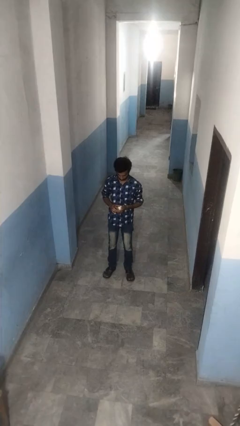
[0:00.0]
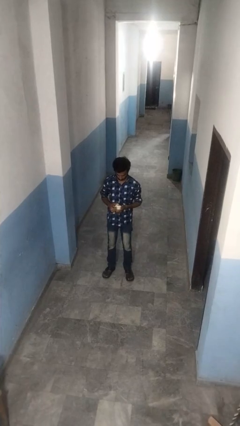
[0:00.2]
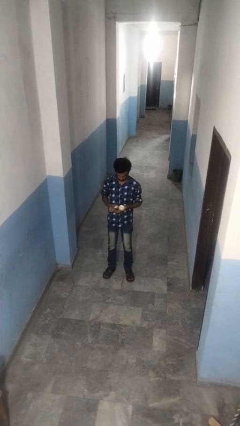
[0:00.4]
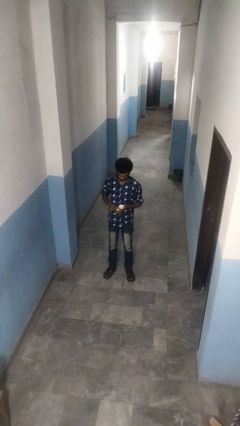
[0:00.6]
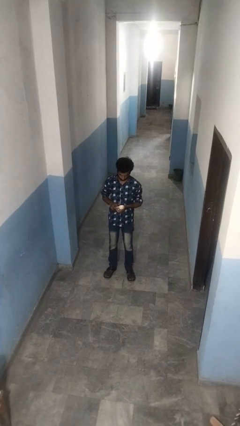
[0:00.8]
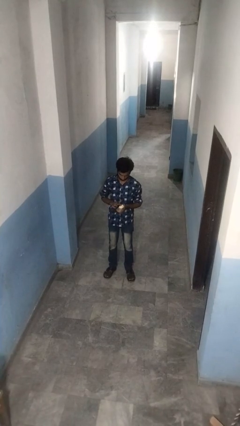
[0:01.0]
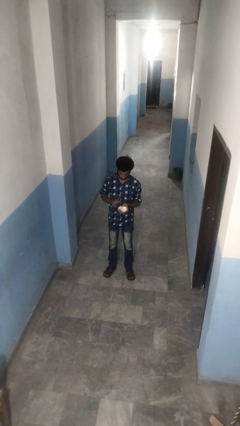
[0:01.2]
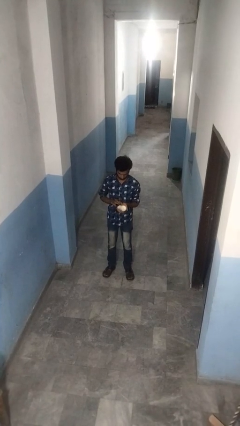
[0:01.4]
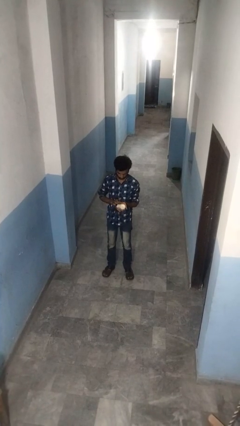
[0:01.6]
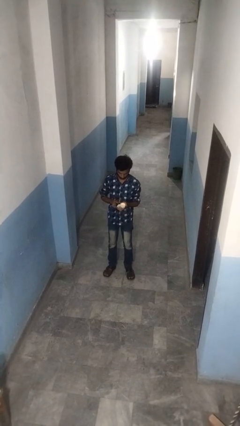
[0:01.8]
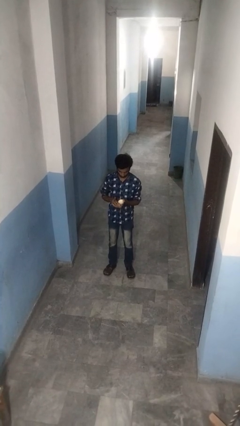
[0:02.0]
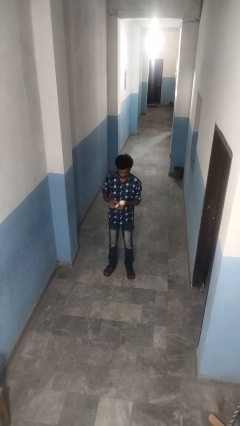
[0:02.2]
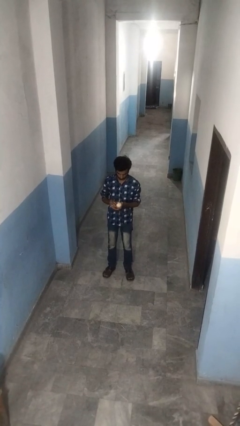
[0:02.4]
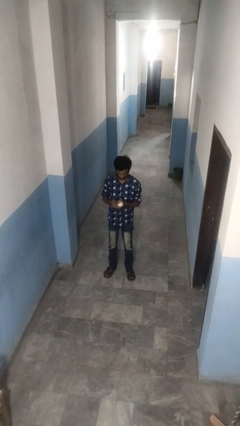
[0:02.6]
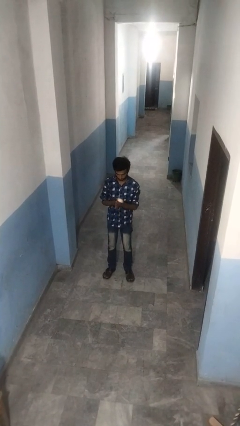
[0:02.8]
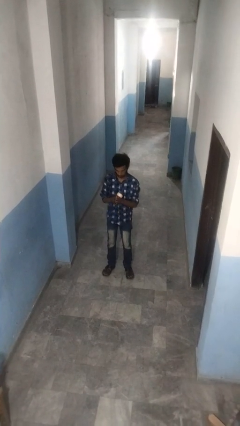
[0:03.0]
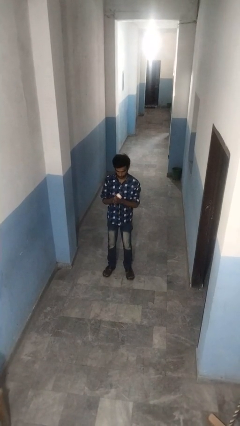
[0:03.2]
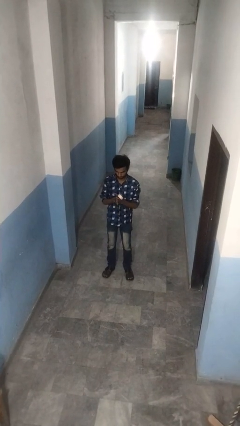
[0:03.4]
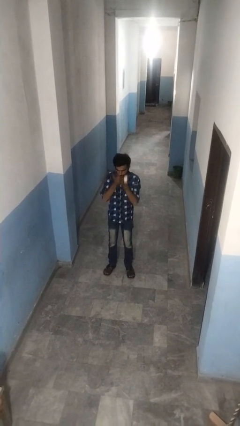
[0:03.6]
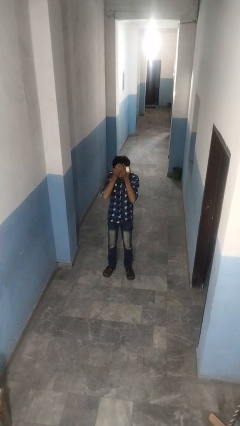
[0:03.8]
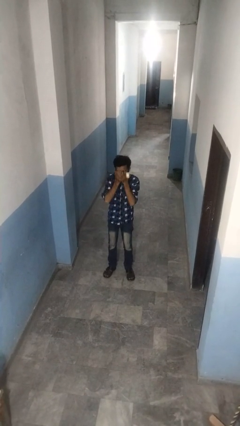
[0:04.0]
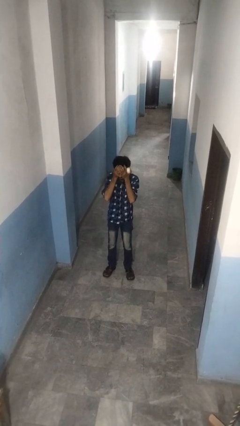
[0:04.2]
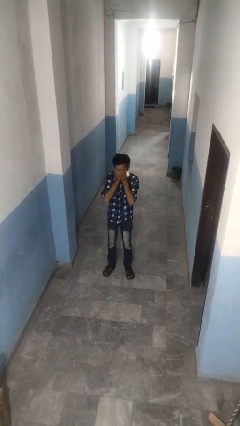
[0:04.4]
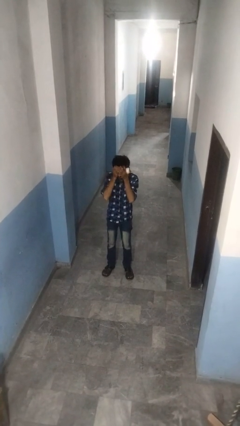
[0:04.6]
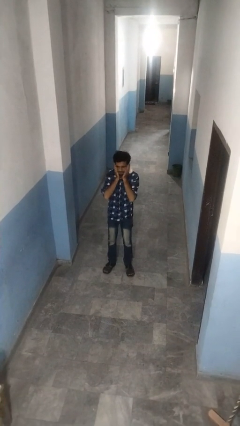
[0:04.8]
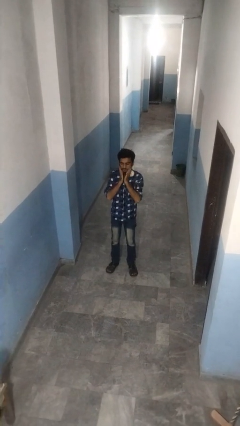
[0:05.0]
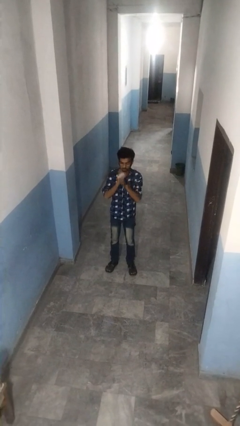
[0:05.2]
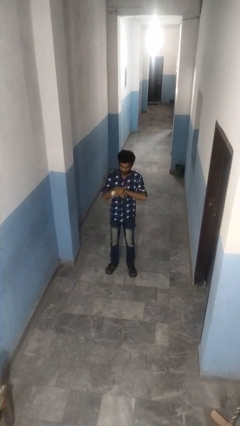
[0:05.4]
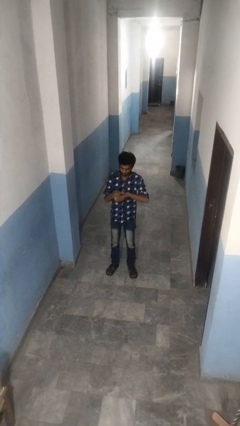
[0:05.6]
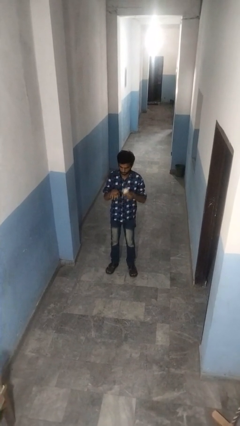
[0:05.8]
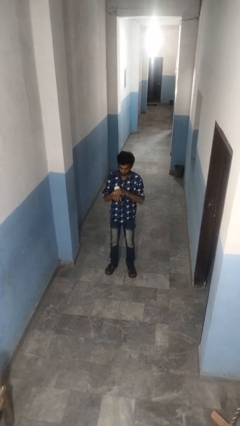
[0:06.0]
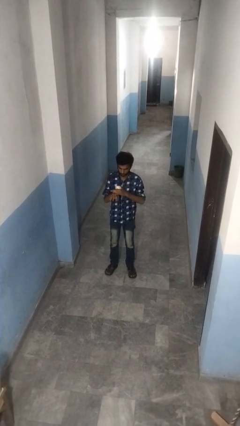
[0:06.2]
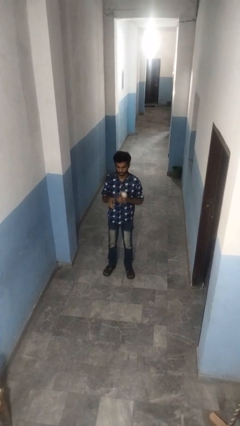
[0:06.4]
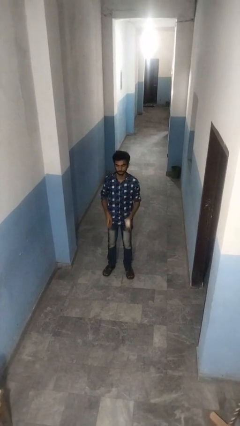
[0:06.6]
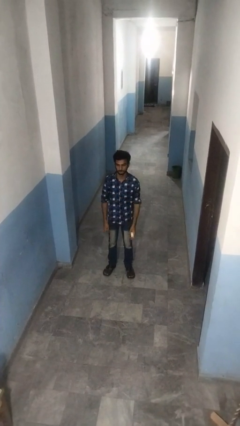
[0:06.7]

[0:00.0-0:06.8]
person applies facial moisturizer

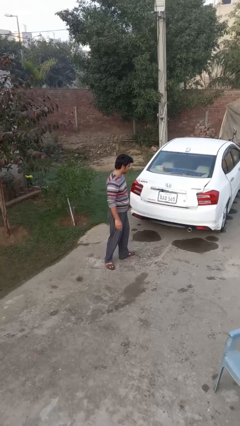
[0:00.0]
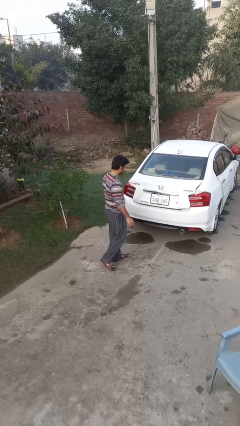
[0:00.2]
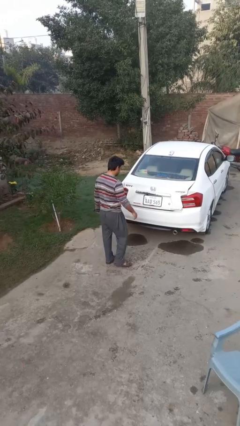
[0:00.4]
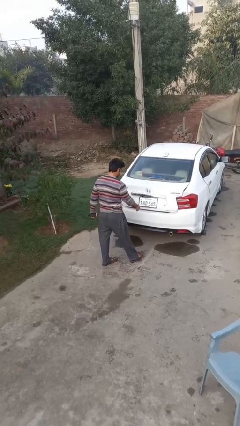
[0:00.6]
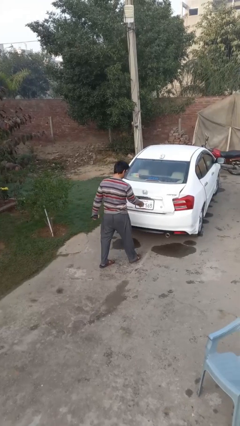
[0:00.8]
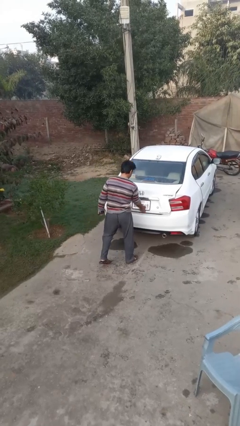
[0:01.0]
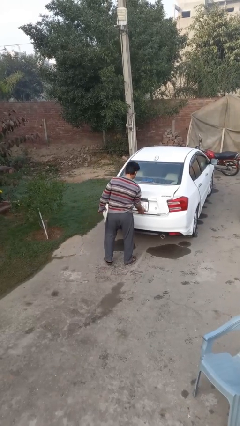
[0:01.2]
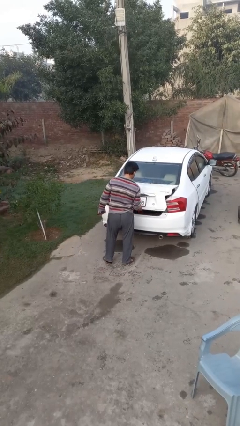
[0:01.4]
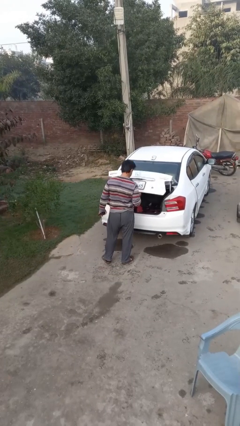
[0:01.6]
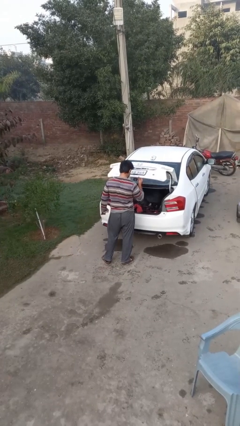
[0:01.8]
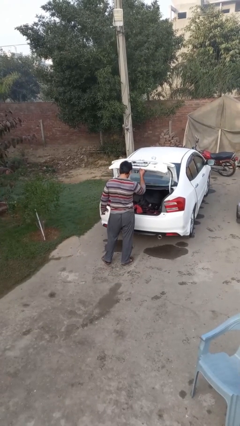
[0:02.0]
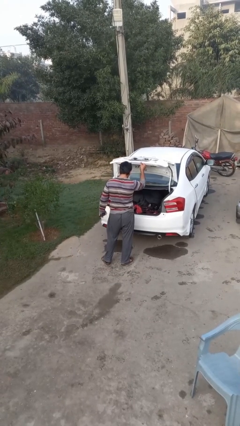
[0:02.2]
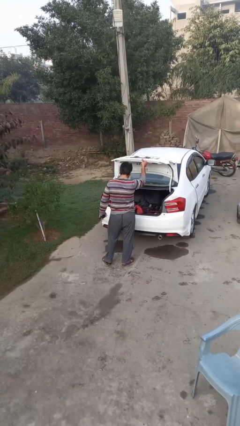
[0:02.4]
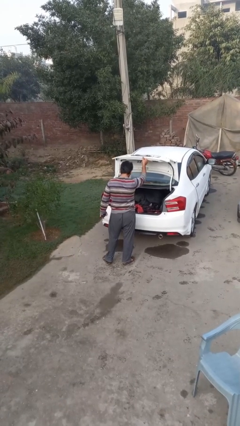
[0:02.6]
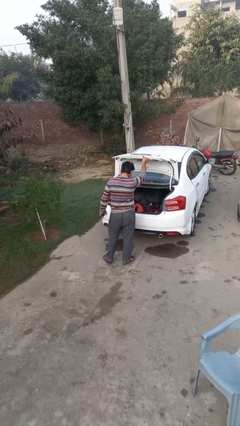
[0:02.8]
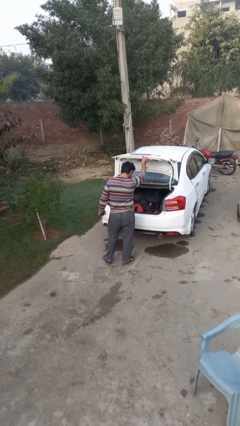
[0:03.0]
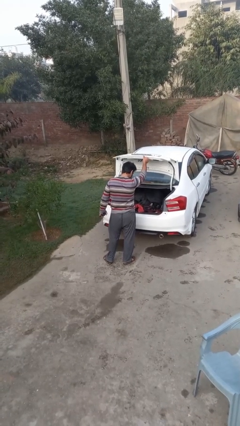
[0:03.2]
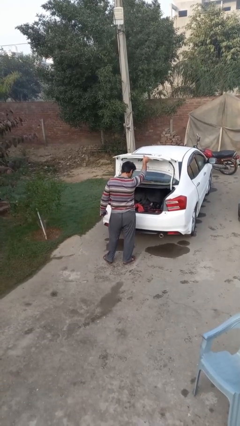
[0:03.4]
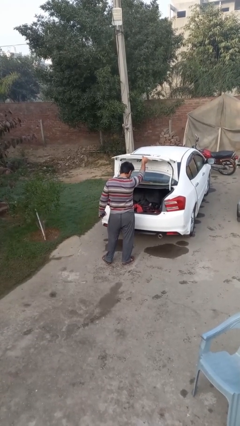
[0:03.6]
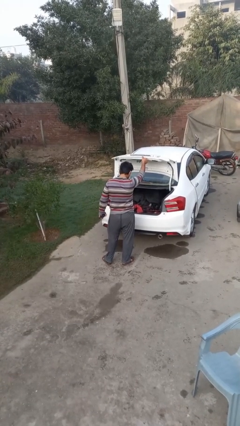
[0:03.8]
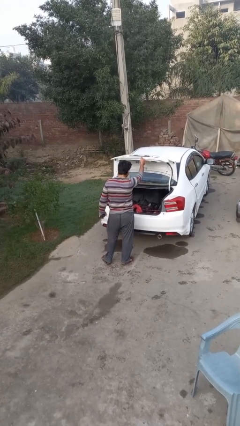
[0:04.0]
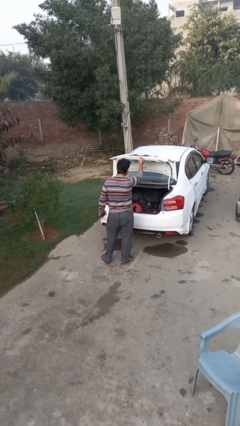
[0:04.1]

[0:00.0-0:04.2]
person opens car trunk

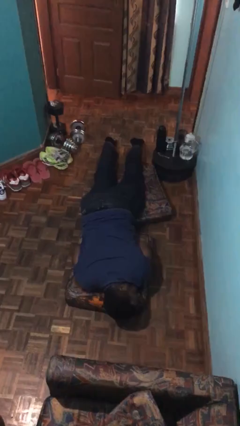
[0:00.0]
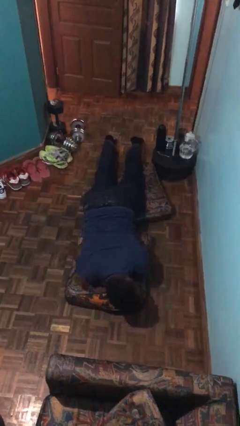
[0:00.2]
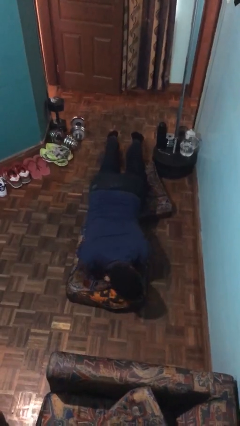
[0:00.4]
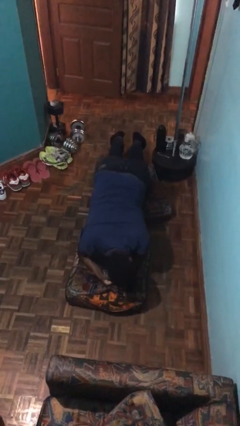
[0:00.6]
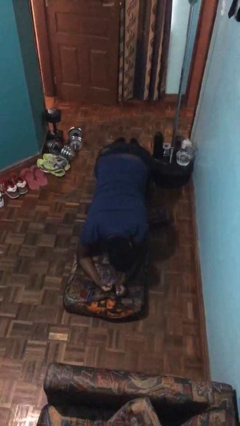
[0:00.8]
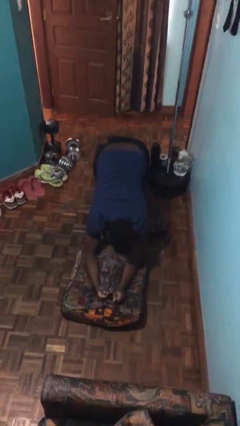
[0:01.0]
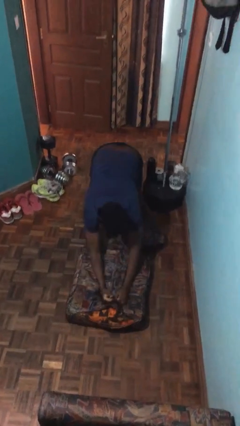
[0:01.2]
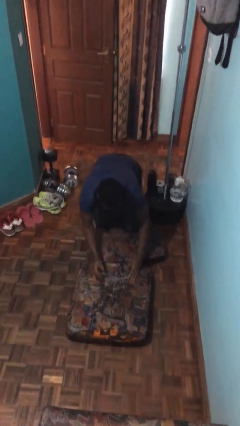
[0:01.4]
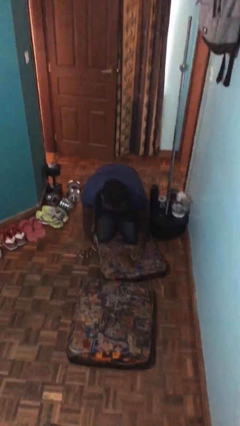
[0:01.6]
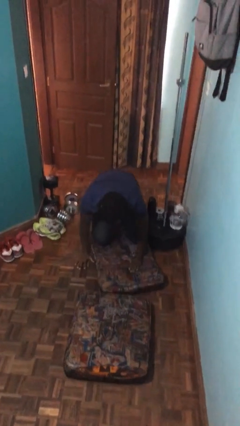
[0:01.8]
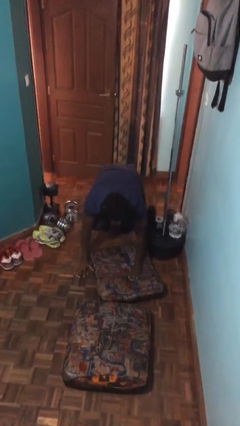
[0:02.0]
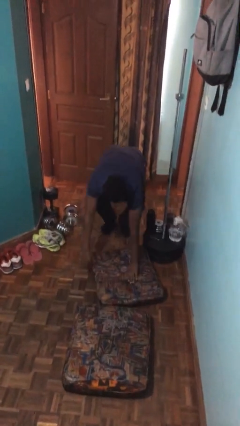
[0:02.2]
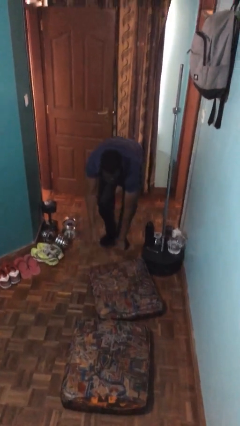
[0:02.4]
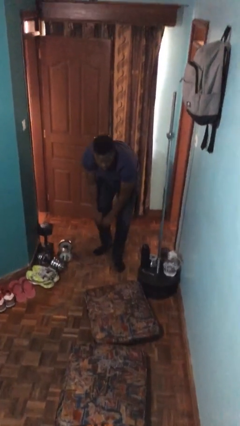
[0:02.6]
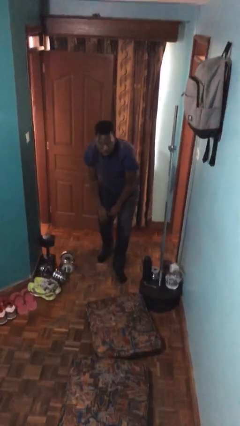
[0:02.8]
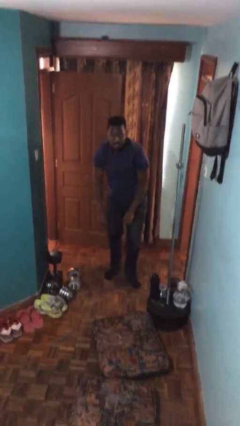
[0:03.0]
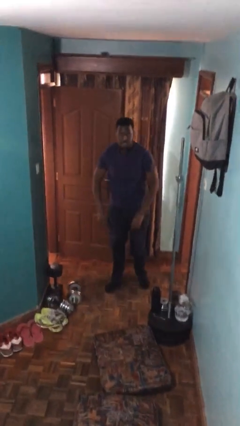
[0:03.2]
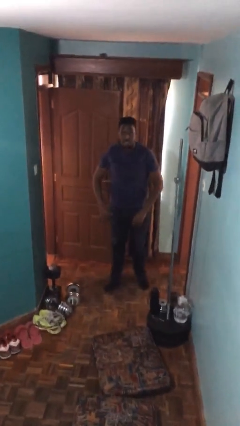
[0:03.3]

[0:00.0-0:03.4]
person stands up from floor

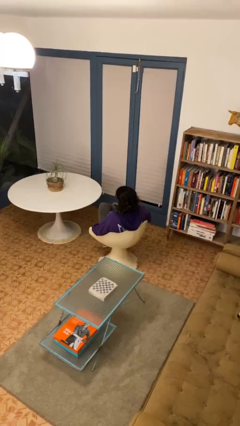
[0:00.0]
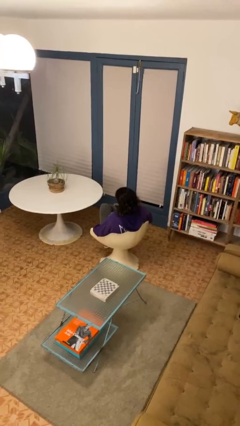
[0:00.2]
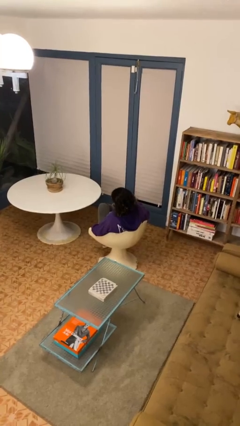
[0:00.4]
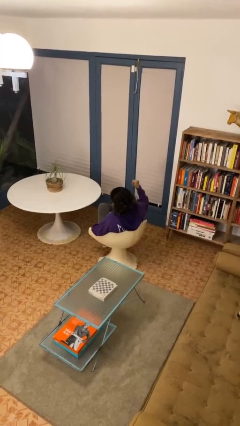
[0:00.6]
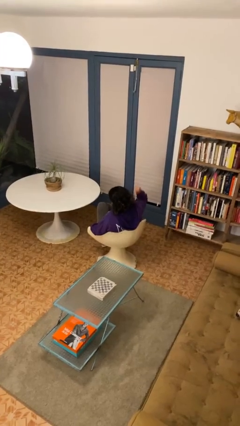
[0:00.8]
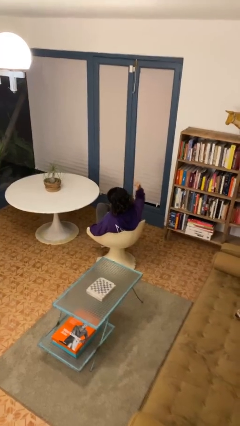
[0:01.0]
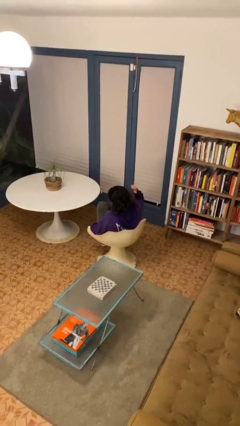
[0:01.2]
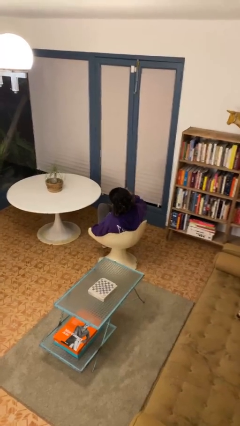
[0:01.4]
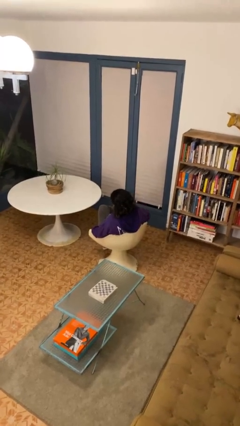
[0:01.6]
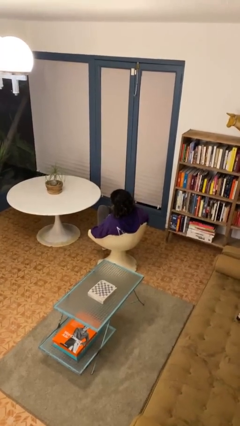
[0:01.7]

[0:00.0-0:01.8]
person gestures behind me

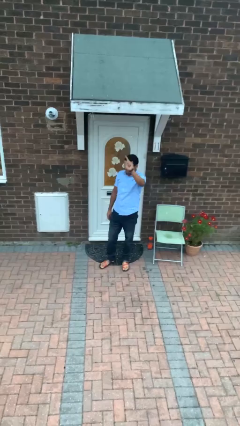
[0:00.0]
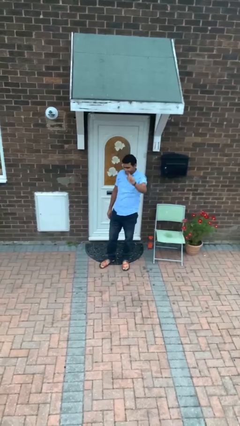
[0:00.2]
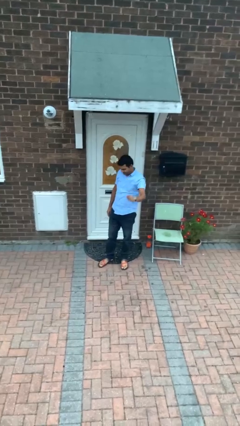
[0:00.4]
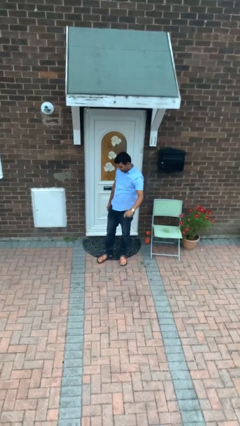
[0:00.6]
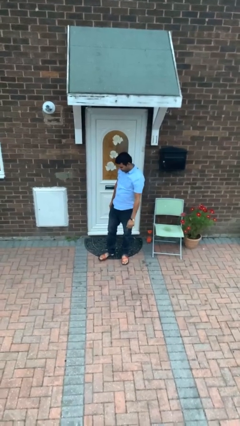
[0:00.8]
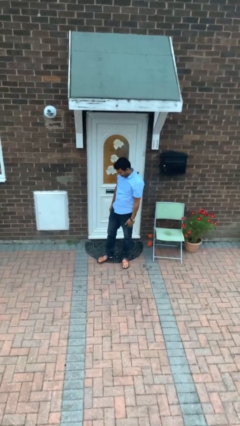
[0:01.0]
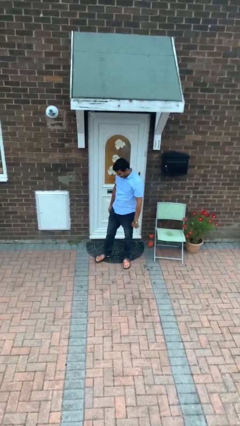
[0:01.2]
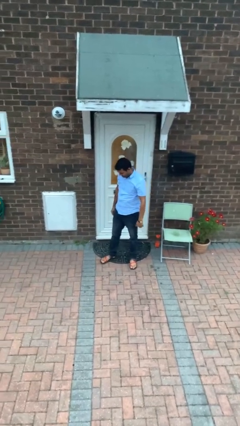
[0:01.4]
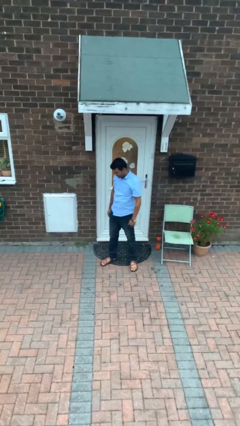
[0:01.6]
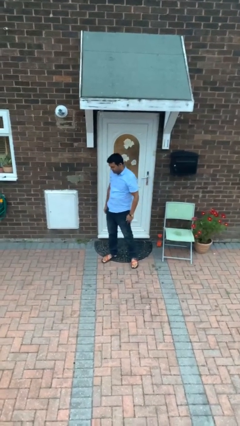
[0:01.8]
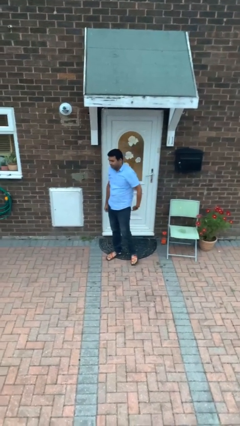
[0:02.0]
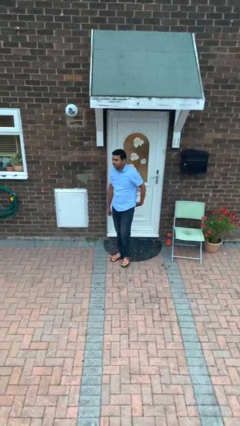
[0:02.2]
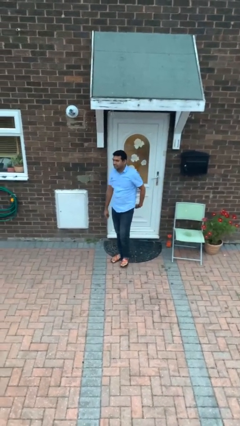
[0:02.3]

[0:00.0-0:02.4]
person gestures lower hand
